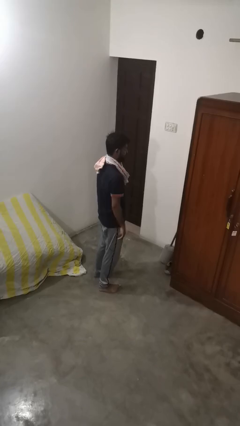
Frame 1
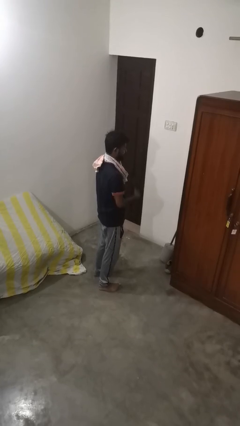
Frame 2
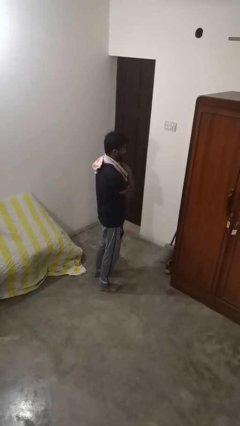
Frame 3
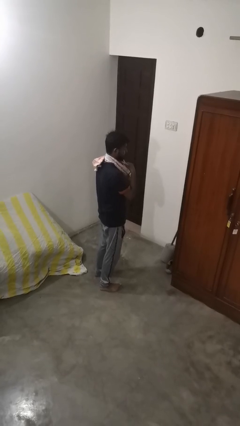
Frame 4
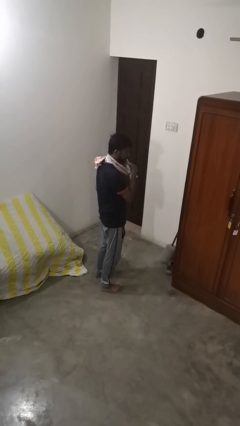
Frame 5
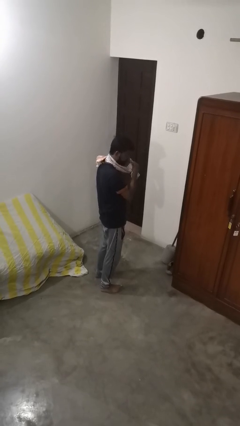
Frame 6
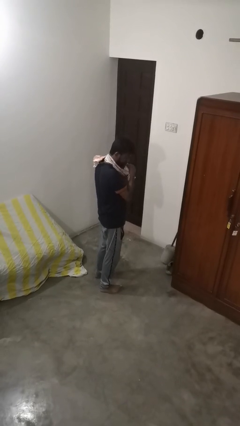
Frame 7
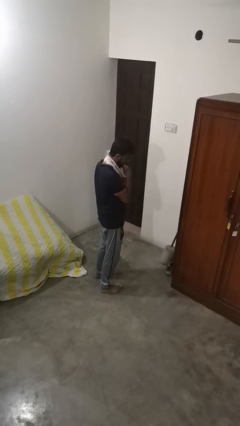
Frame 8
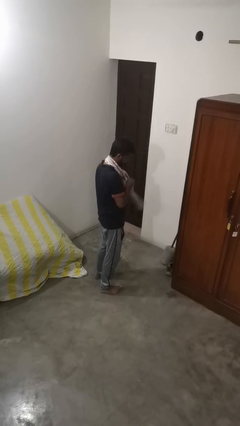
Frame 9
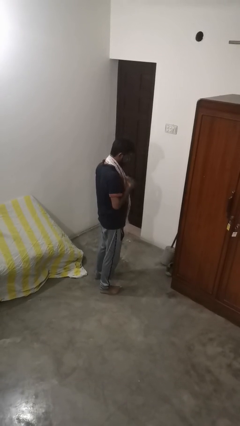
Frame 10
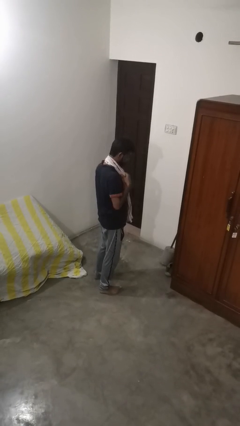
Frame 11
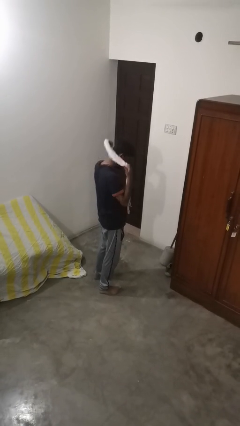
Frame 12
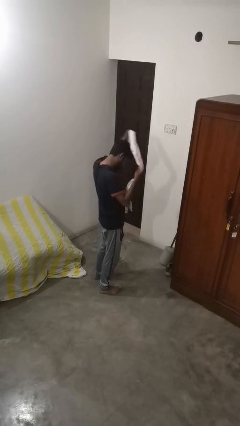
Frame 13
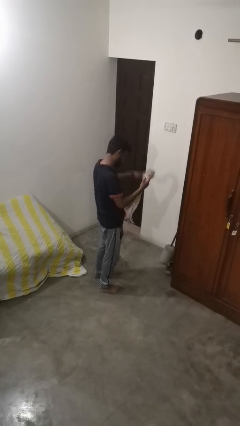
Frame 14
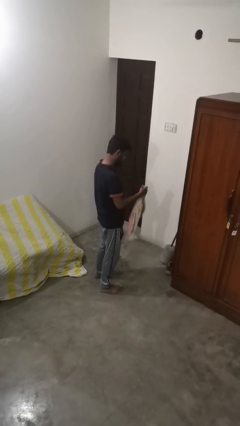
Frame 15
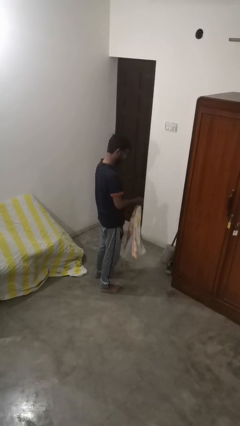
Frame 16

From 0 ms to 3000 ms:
person takes off scarf

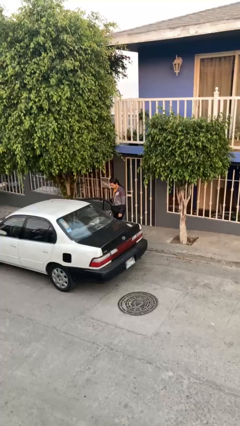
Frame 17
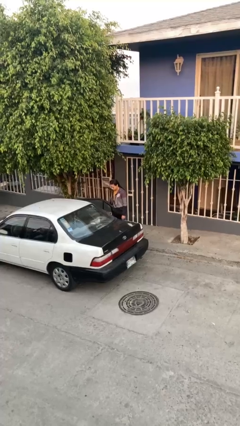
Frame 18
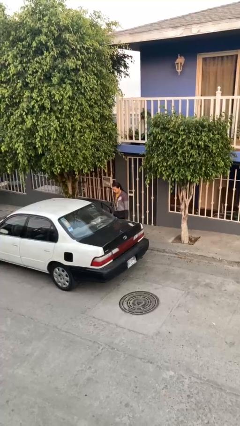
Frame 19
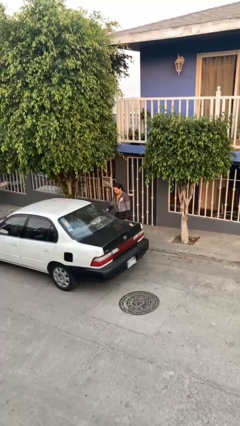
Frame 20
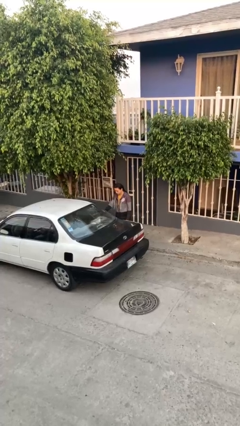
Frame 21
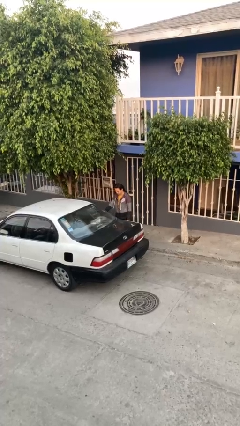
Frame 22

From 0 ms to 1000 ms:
person closes car door

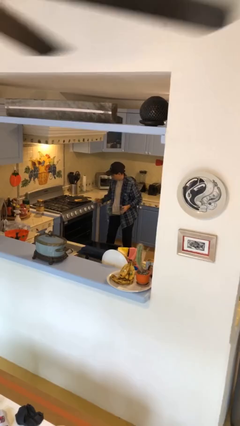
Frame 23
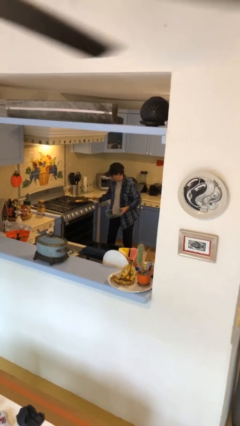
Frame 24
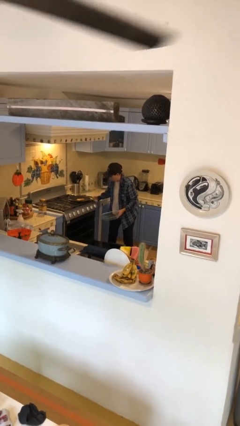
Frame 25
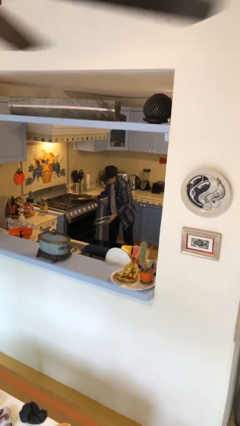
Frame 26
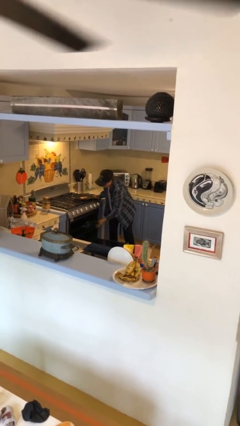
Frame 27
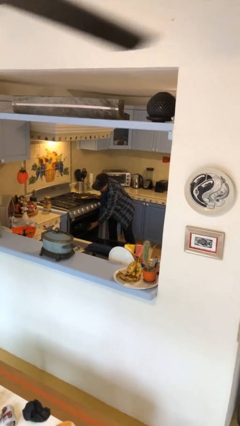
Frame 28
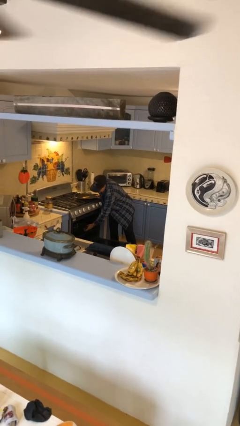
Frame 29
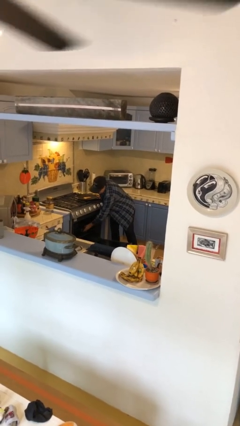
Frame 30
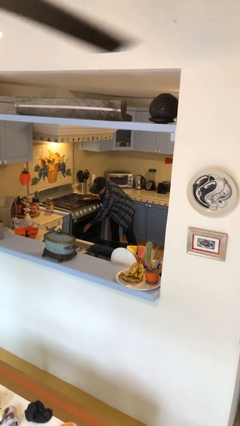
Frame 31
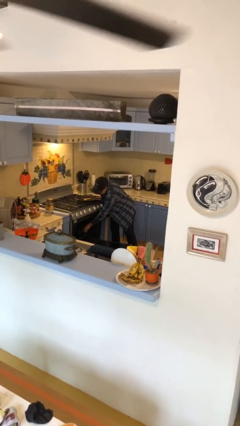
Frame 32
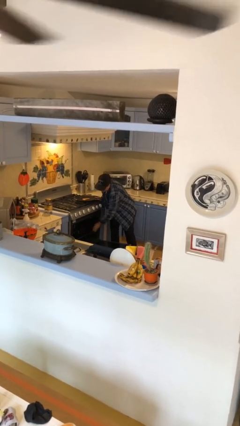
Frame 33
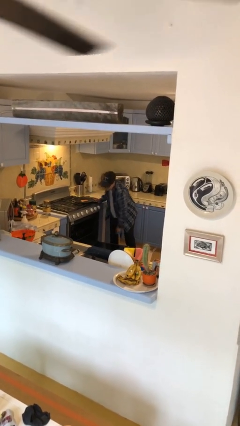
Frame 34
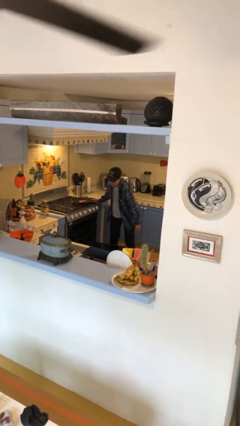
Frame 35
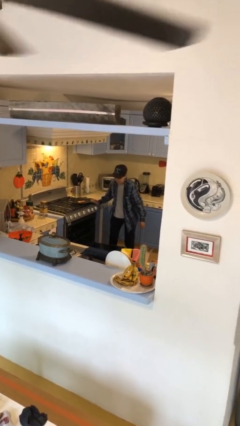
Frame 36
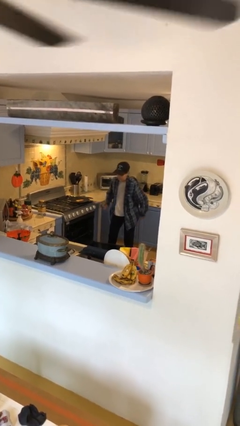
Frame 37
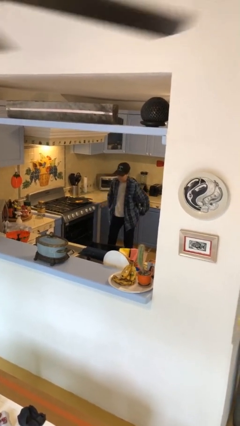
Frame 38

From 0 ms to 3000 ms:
person puts object into oven

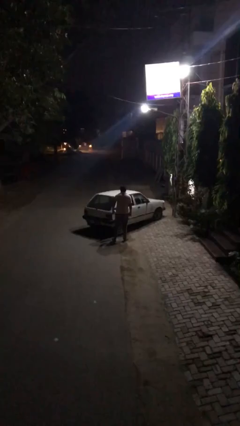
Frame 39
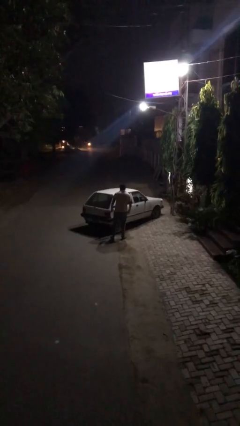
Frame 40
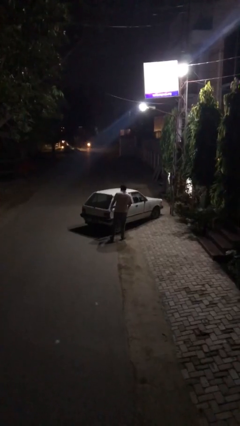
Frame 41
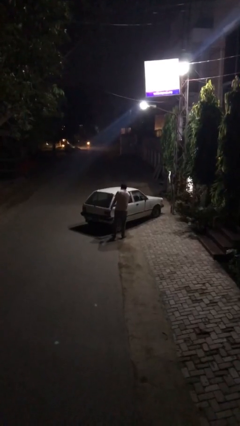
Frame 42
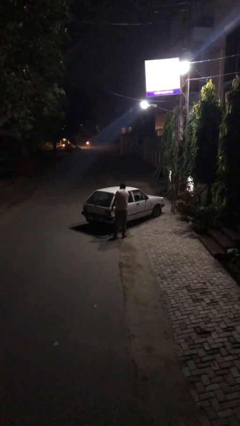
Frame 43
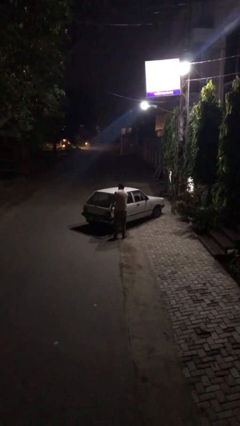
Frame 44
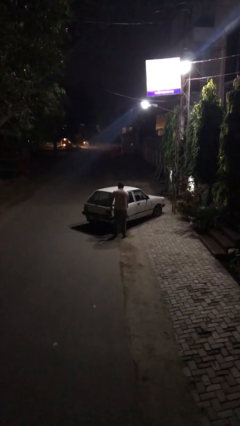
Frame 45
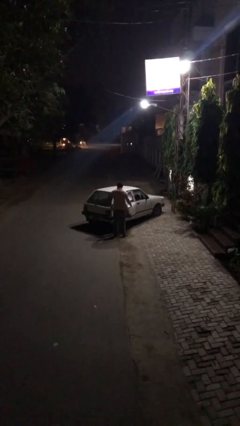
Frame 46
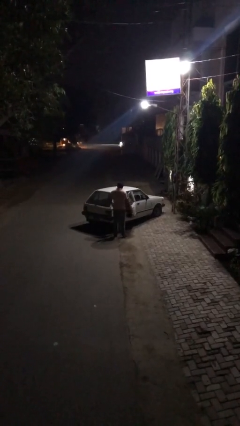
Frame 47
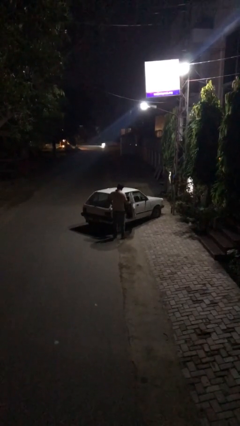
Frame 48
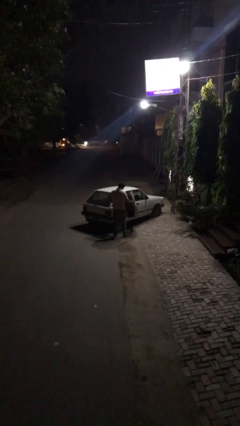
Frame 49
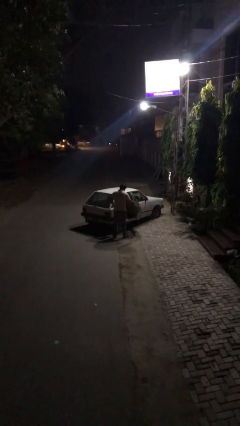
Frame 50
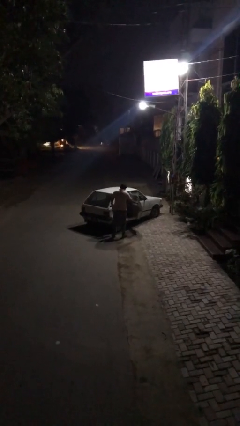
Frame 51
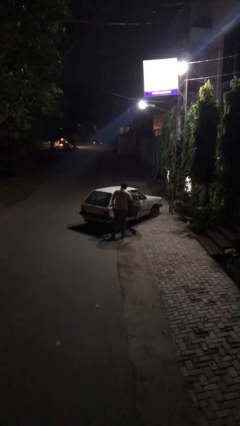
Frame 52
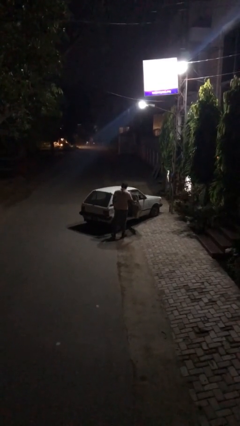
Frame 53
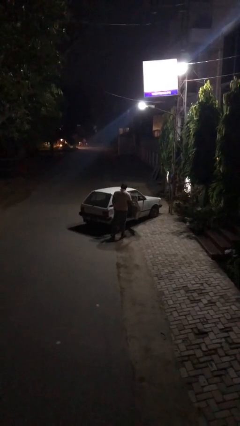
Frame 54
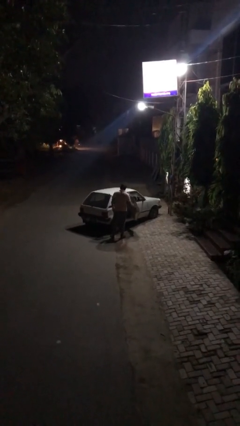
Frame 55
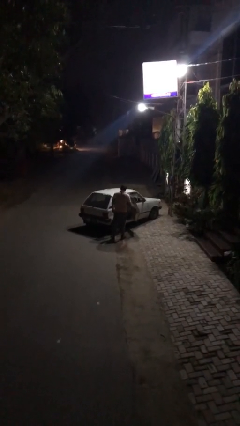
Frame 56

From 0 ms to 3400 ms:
person opens car door

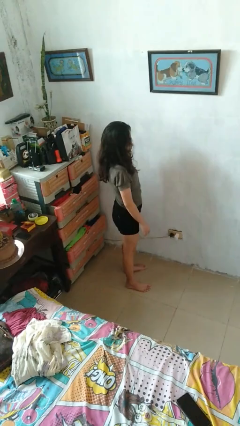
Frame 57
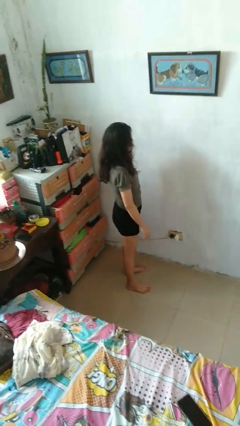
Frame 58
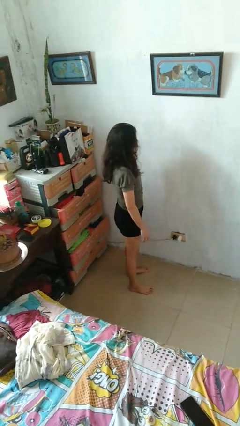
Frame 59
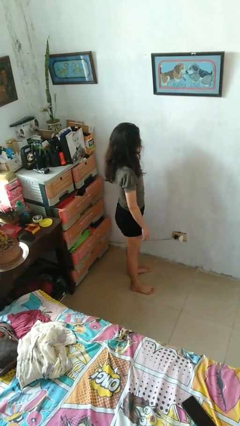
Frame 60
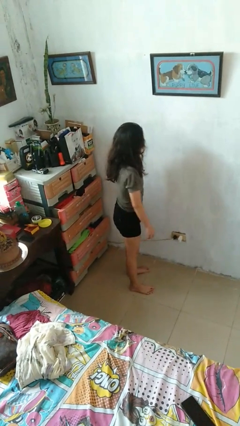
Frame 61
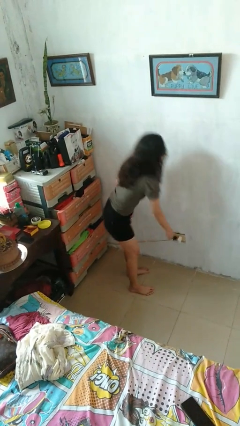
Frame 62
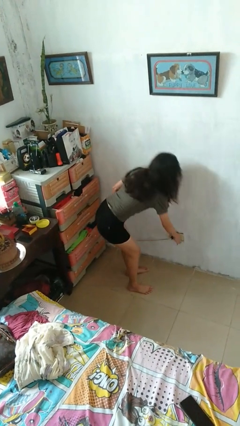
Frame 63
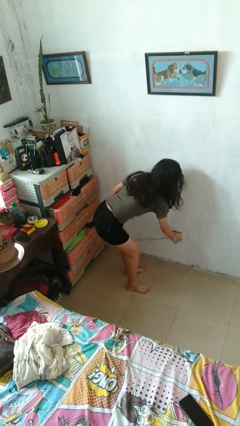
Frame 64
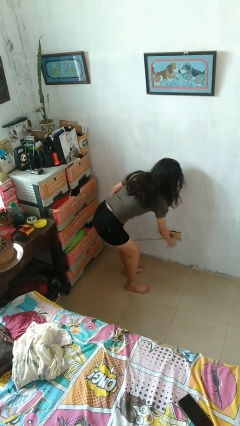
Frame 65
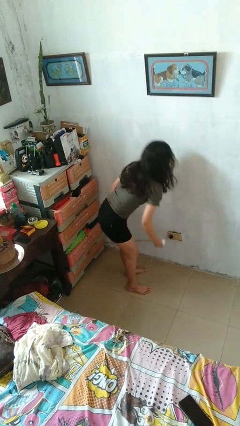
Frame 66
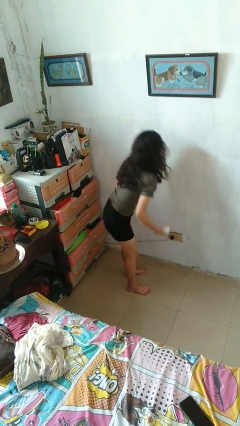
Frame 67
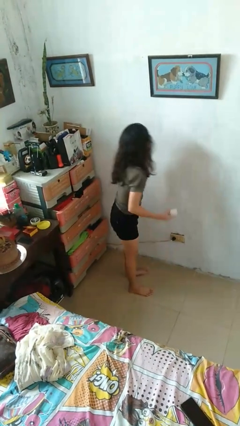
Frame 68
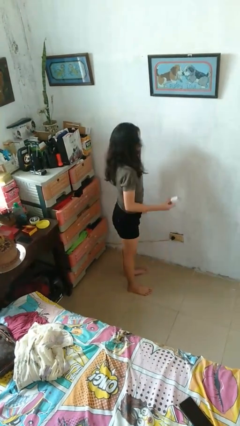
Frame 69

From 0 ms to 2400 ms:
person unplugs from electrical socket

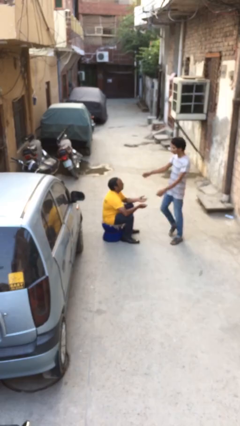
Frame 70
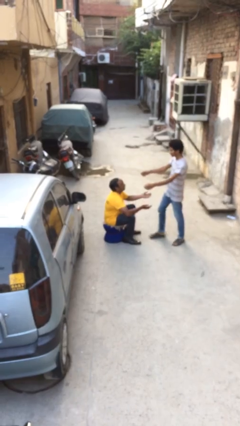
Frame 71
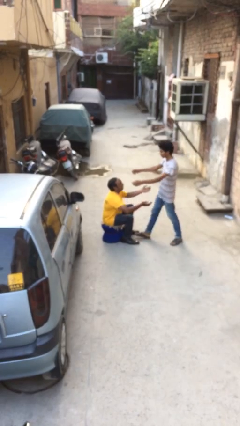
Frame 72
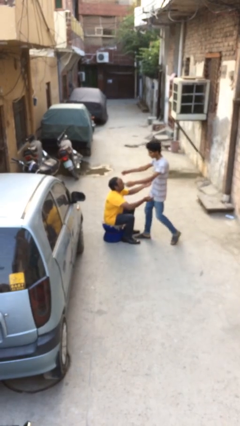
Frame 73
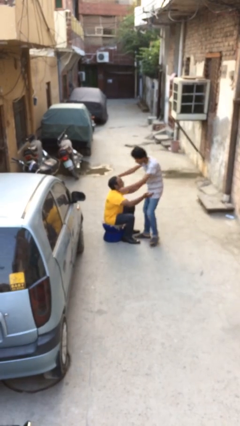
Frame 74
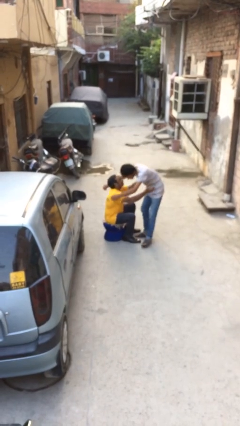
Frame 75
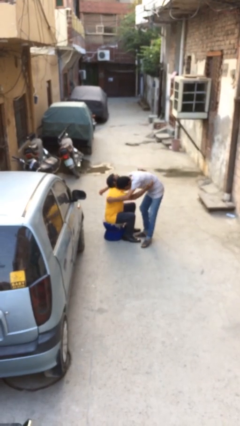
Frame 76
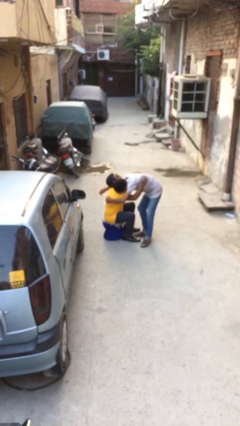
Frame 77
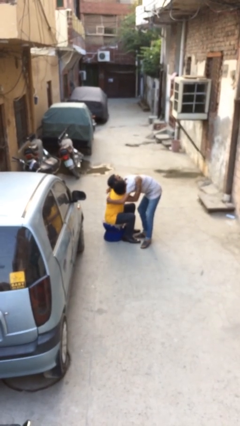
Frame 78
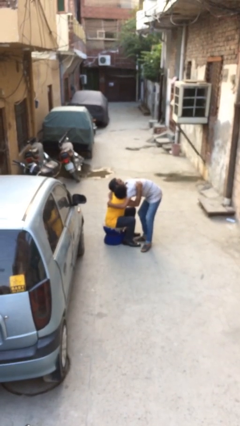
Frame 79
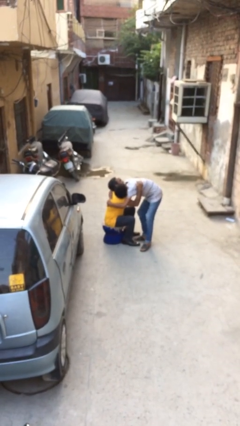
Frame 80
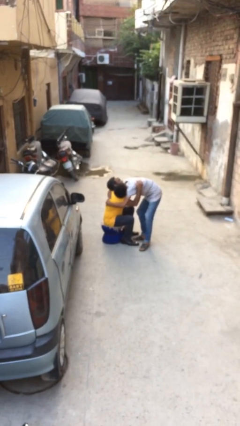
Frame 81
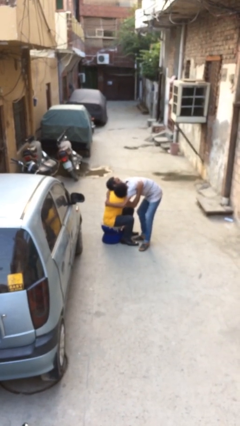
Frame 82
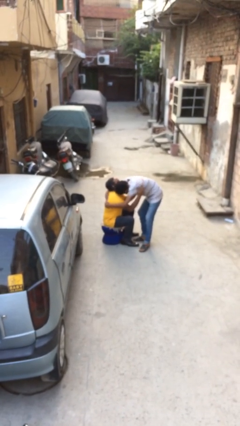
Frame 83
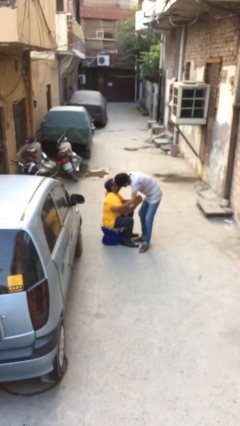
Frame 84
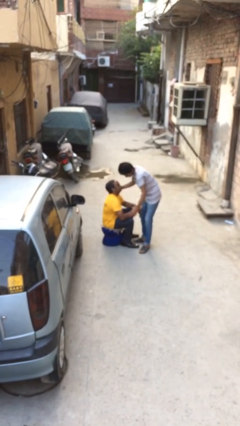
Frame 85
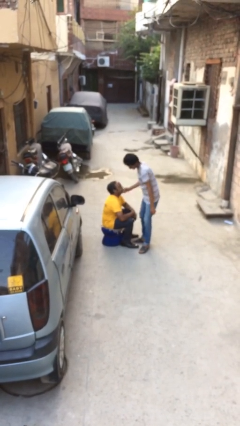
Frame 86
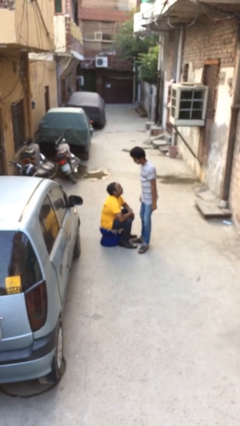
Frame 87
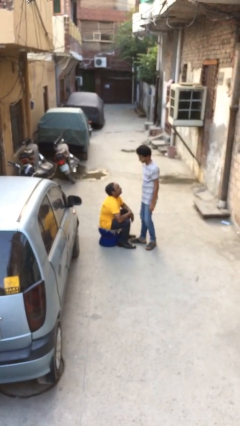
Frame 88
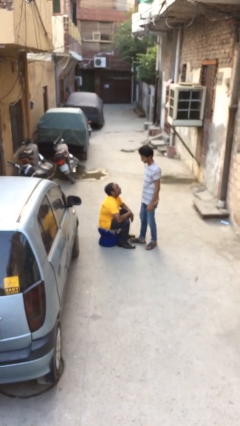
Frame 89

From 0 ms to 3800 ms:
person embraces person

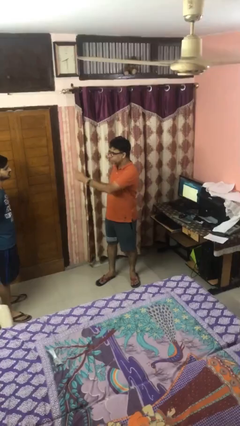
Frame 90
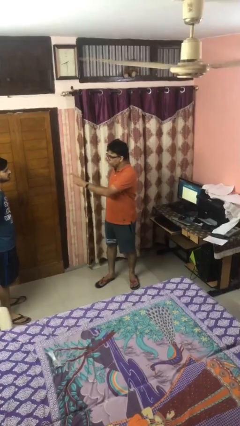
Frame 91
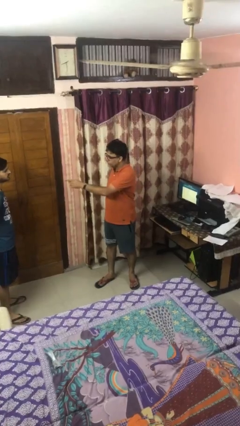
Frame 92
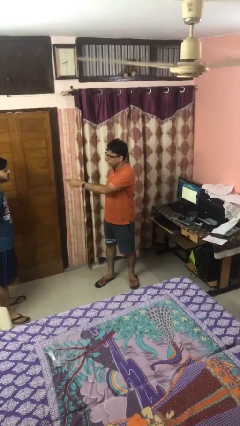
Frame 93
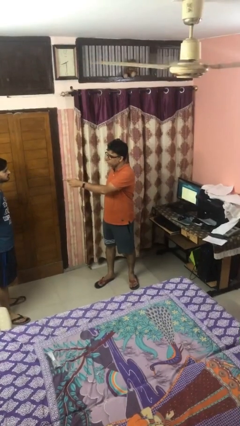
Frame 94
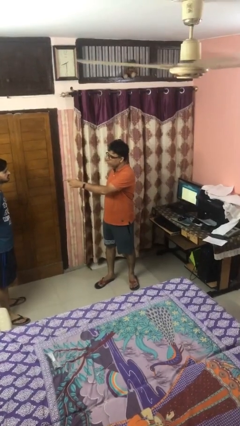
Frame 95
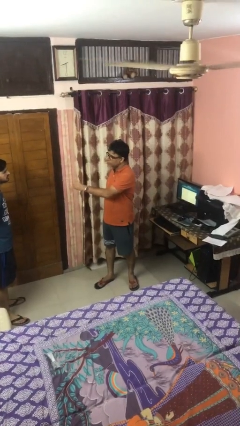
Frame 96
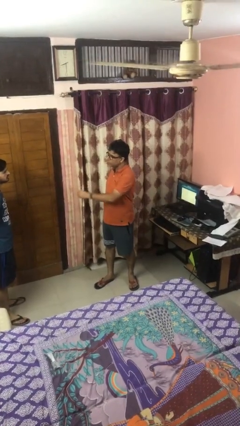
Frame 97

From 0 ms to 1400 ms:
person points at person
